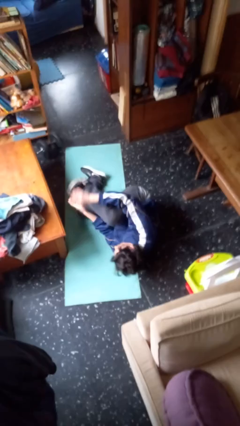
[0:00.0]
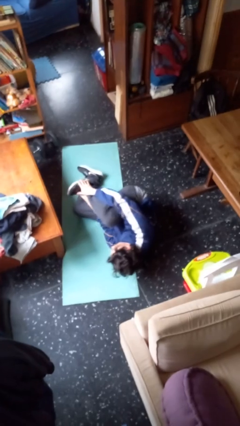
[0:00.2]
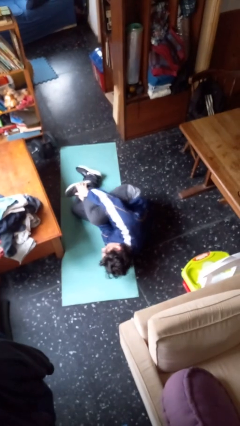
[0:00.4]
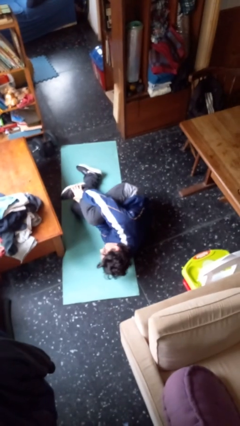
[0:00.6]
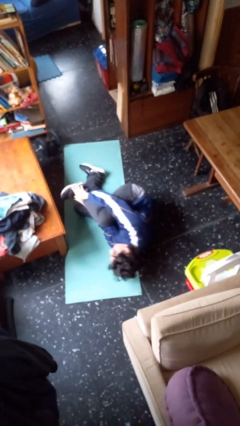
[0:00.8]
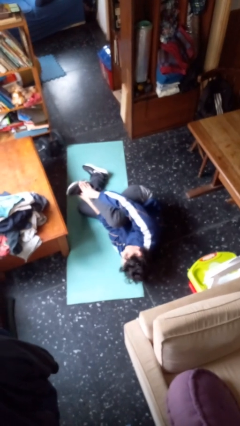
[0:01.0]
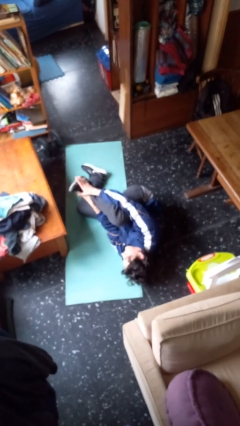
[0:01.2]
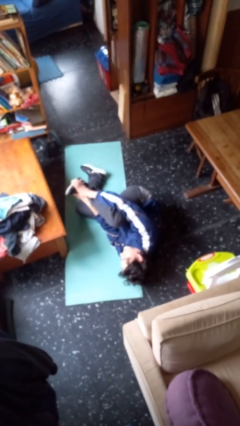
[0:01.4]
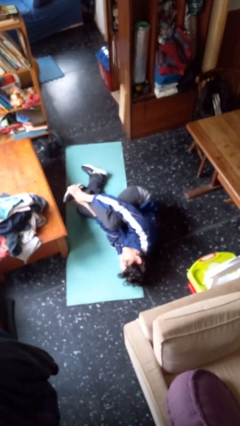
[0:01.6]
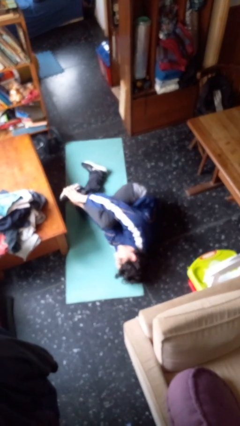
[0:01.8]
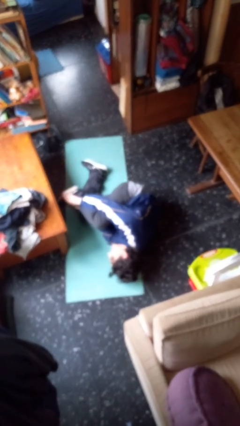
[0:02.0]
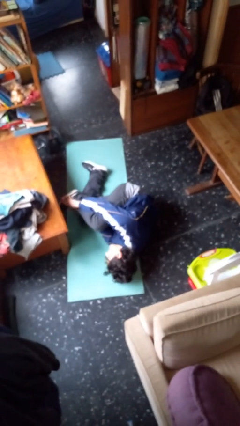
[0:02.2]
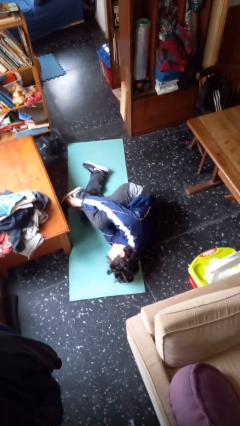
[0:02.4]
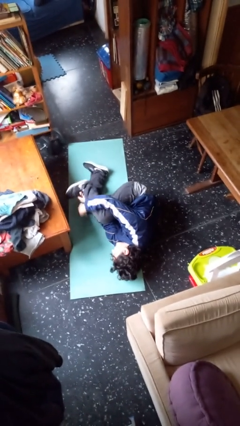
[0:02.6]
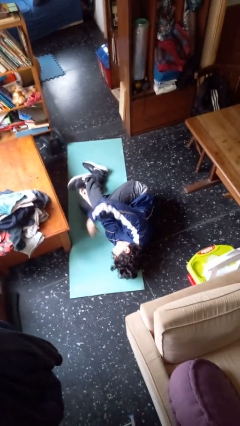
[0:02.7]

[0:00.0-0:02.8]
person lies down on floor

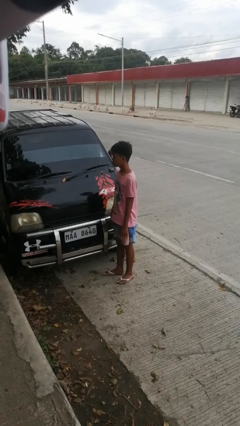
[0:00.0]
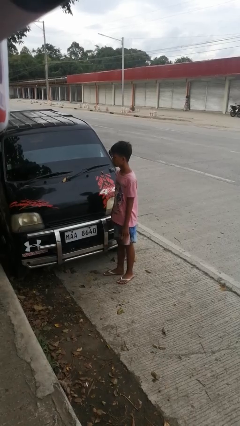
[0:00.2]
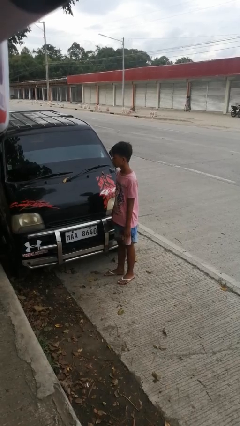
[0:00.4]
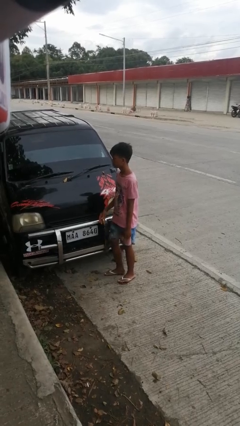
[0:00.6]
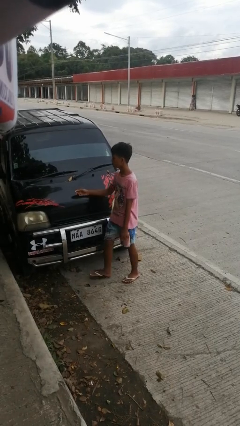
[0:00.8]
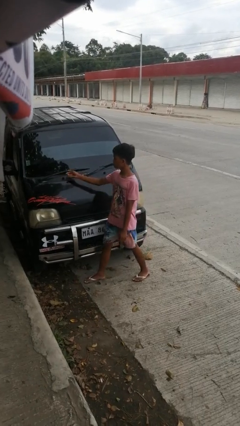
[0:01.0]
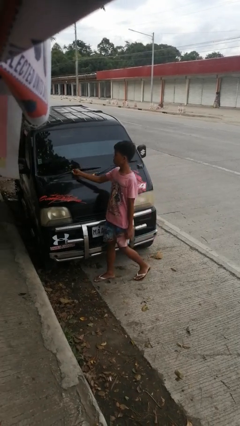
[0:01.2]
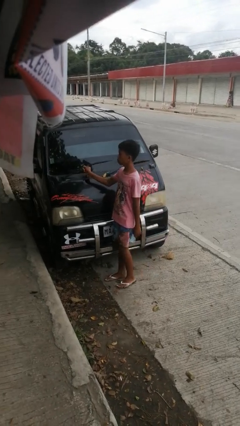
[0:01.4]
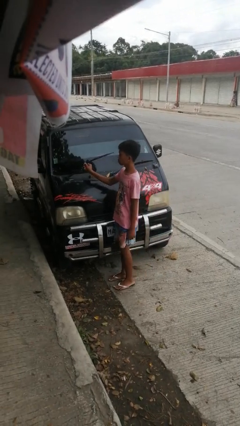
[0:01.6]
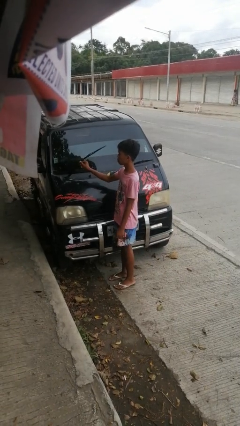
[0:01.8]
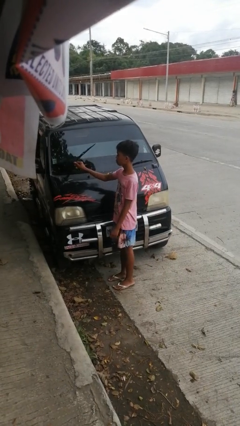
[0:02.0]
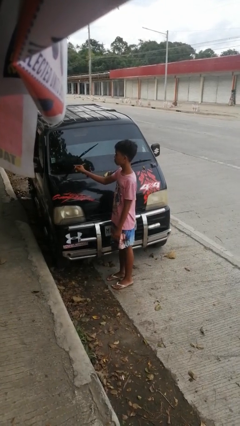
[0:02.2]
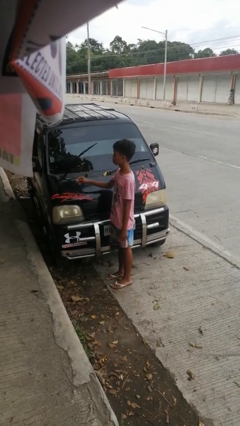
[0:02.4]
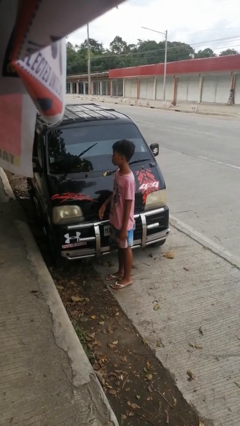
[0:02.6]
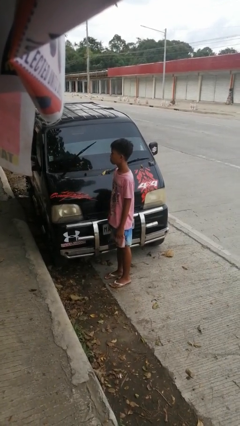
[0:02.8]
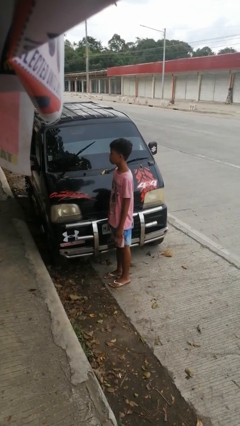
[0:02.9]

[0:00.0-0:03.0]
person flips up car wipers

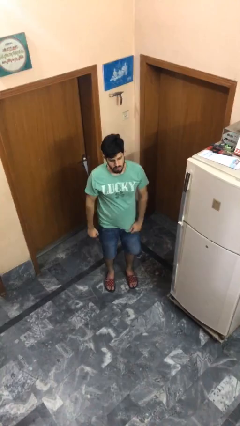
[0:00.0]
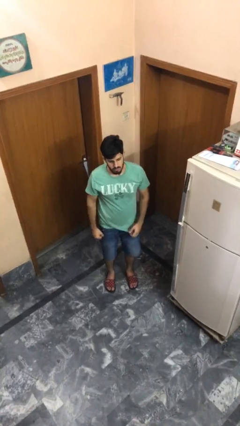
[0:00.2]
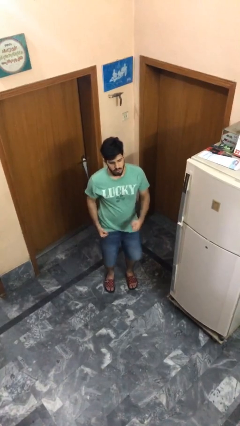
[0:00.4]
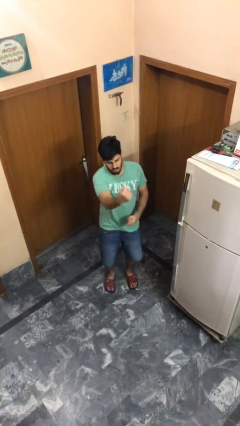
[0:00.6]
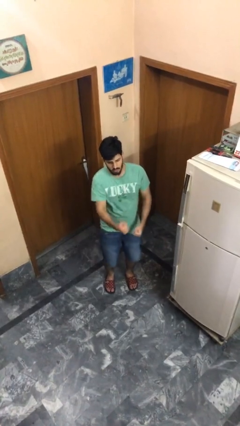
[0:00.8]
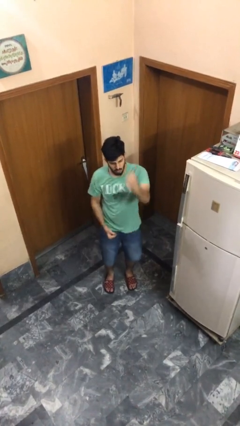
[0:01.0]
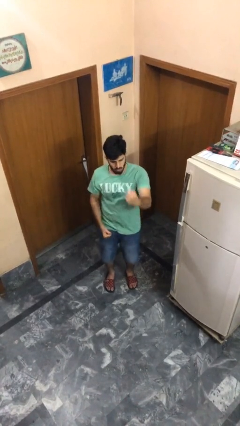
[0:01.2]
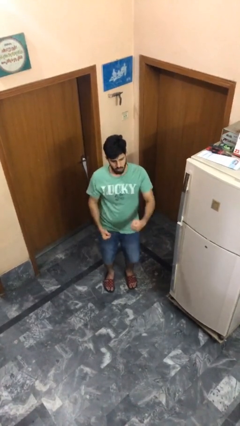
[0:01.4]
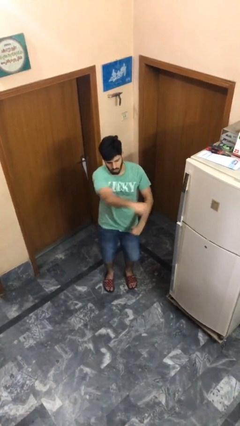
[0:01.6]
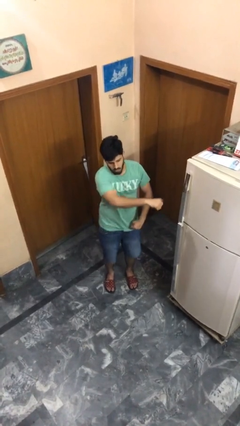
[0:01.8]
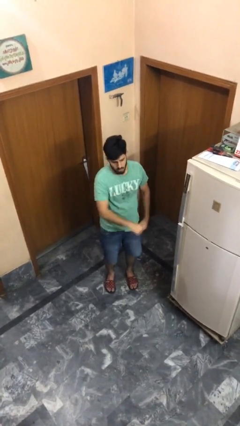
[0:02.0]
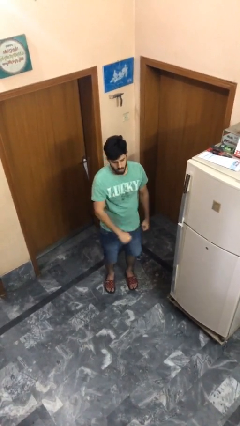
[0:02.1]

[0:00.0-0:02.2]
person punches

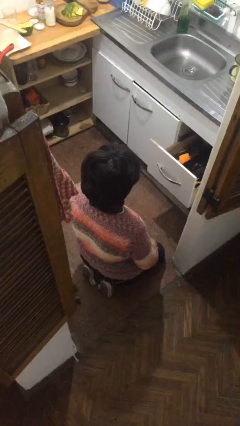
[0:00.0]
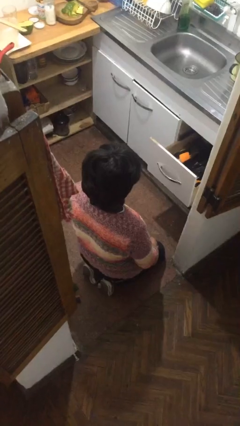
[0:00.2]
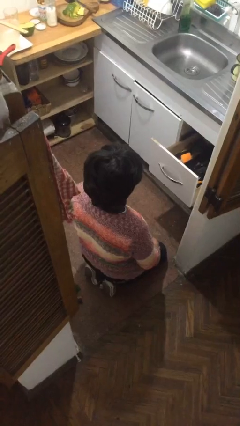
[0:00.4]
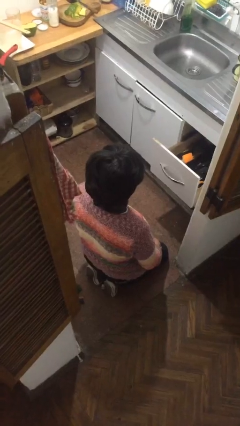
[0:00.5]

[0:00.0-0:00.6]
person takes object from kitchen drawer

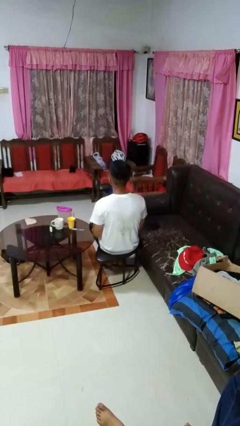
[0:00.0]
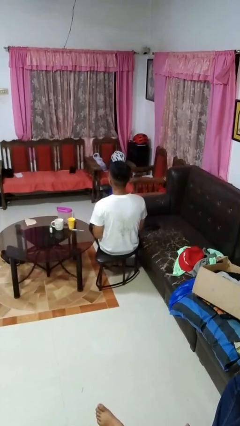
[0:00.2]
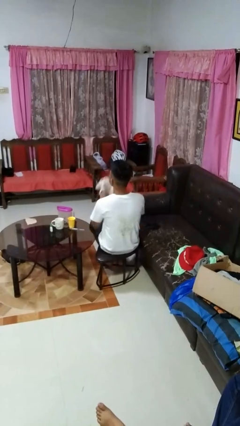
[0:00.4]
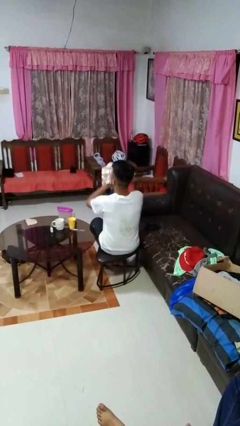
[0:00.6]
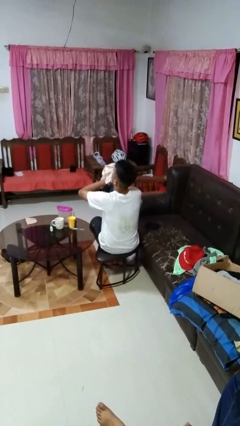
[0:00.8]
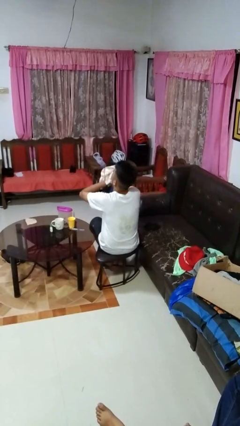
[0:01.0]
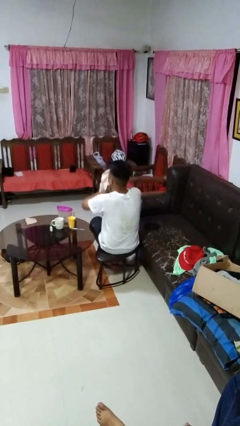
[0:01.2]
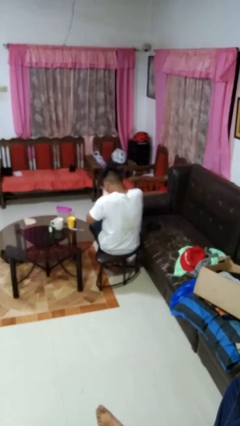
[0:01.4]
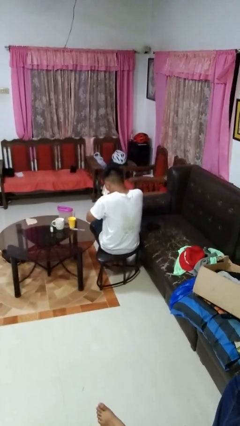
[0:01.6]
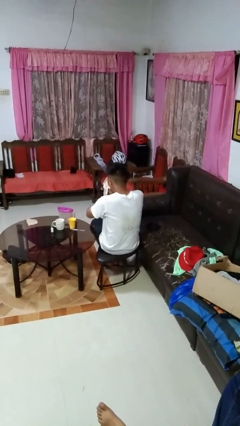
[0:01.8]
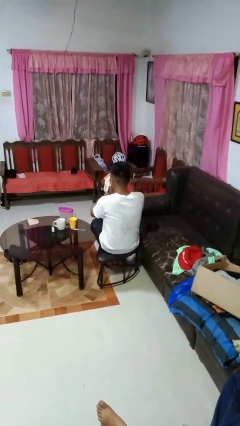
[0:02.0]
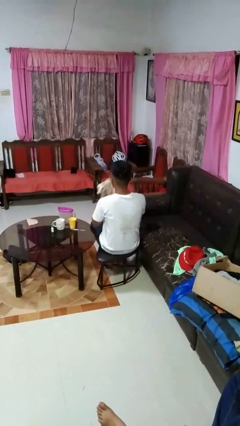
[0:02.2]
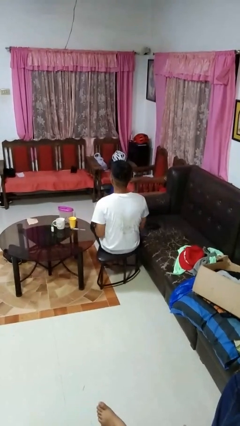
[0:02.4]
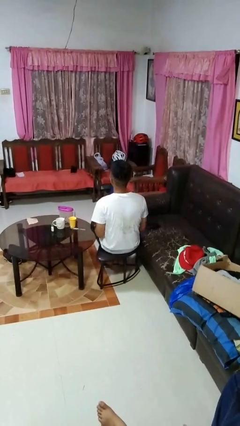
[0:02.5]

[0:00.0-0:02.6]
person blows nose

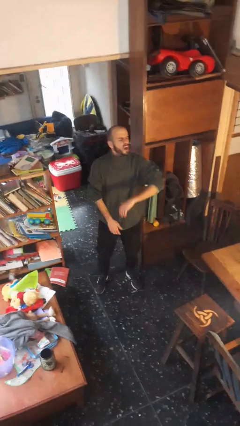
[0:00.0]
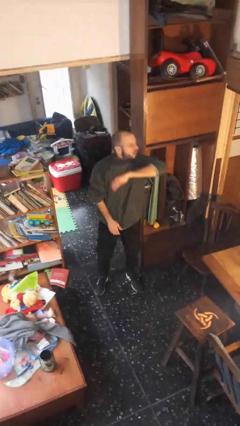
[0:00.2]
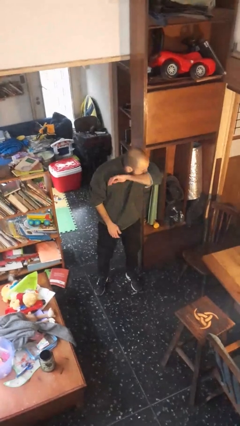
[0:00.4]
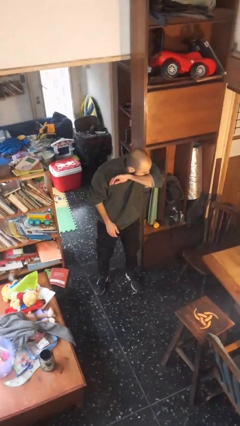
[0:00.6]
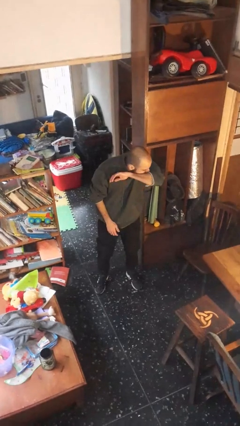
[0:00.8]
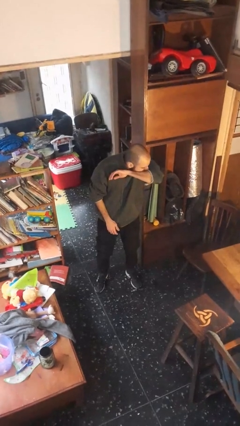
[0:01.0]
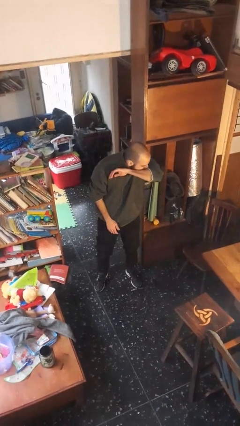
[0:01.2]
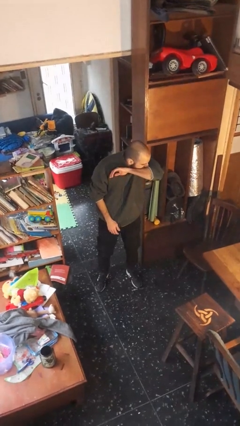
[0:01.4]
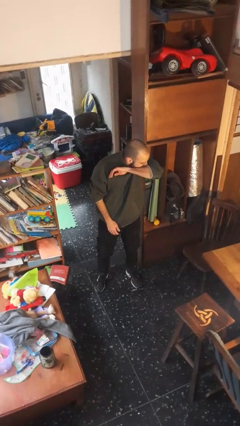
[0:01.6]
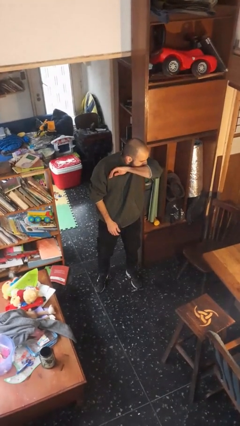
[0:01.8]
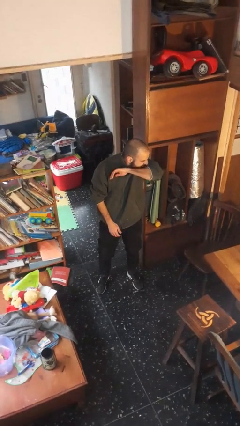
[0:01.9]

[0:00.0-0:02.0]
person sneezes into arm

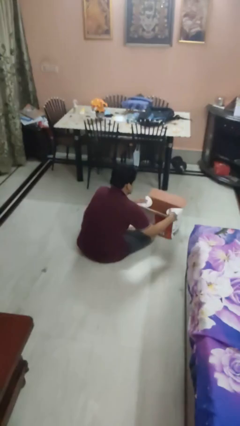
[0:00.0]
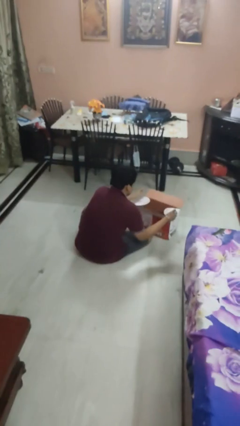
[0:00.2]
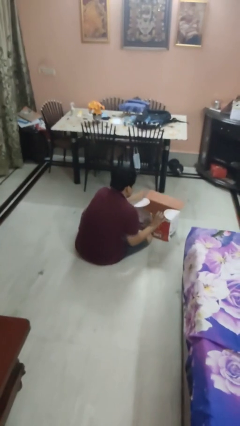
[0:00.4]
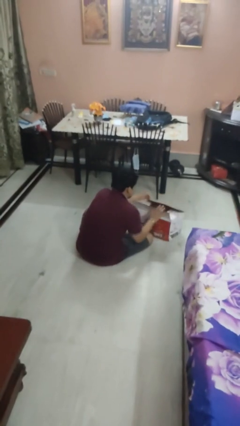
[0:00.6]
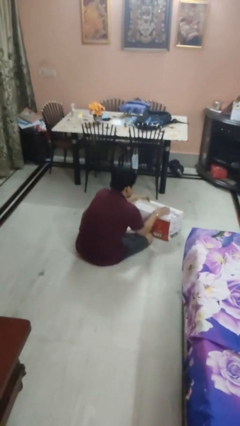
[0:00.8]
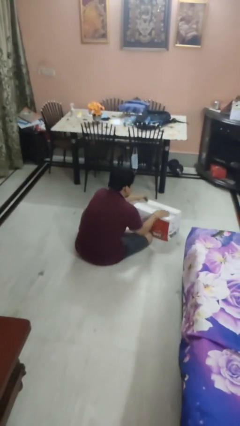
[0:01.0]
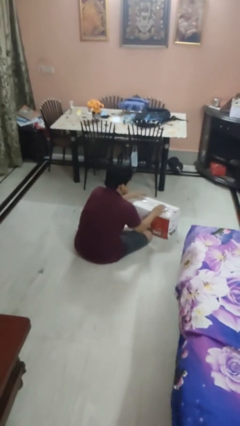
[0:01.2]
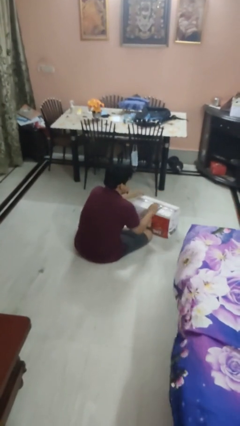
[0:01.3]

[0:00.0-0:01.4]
person closes box

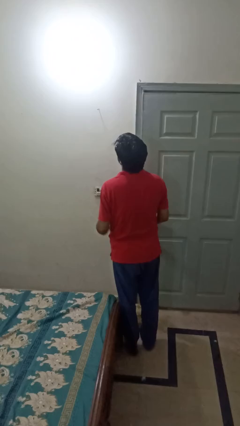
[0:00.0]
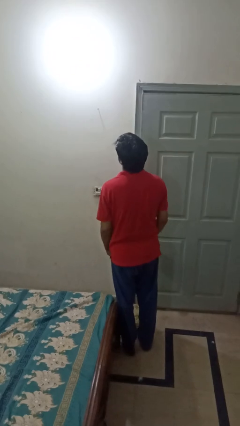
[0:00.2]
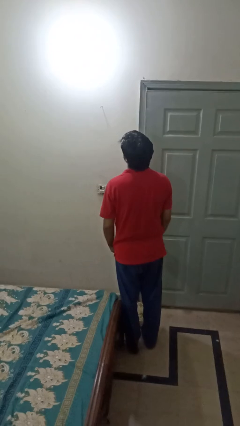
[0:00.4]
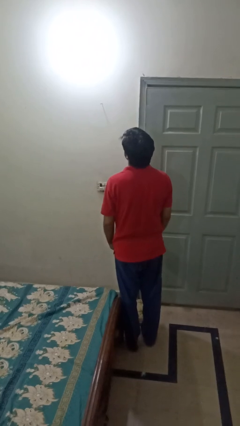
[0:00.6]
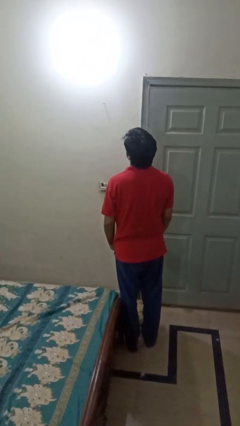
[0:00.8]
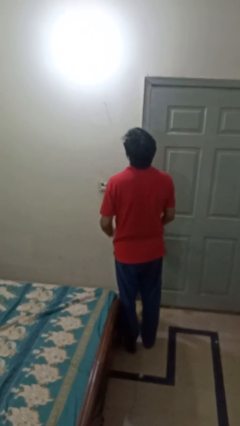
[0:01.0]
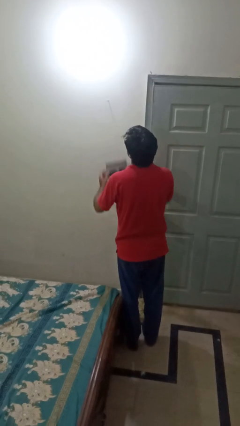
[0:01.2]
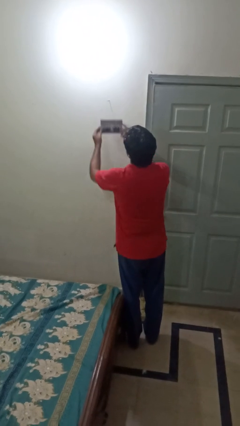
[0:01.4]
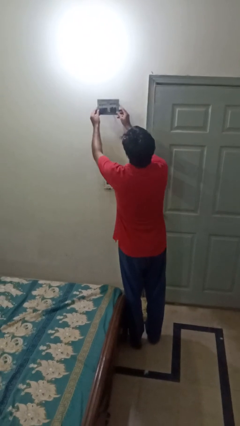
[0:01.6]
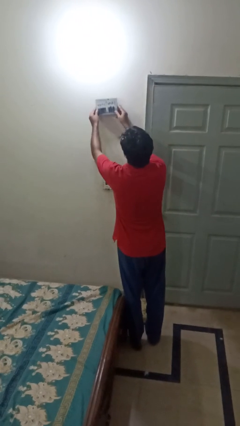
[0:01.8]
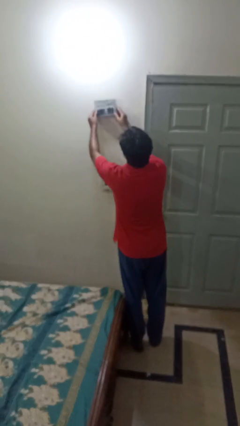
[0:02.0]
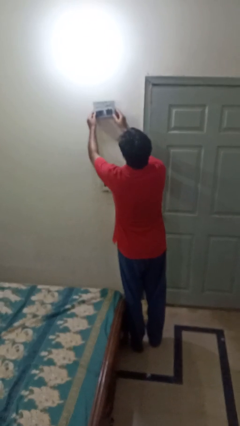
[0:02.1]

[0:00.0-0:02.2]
person puts up picture frame
